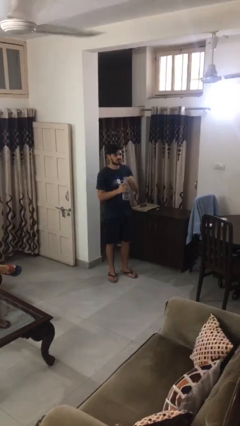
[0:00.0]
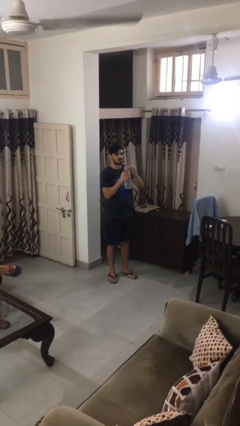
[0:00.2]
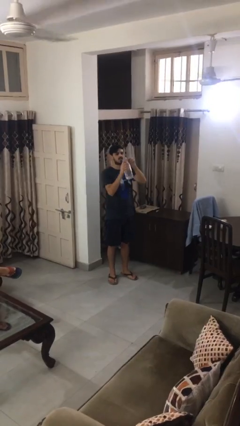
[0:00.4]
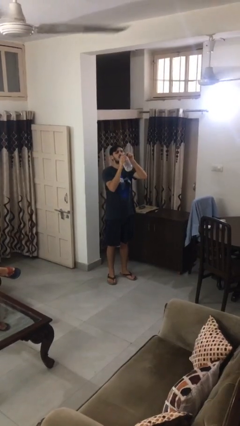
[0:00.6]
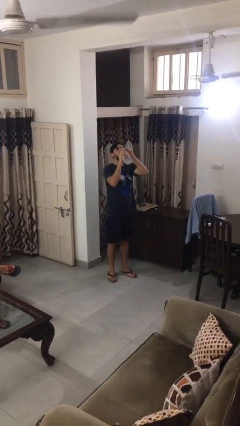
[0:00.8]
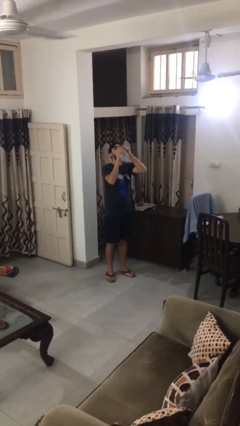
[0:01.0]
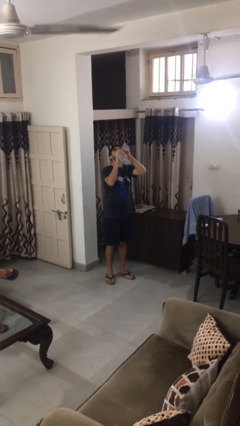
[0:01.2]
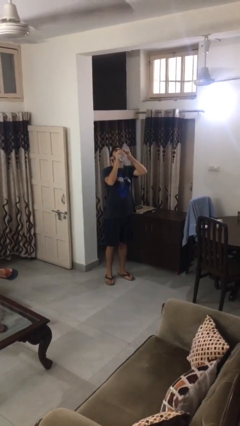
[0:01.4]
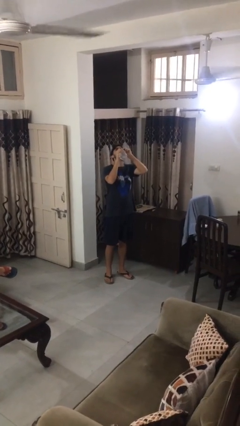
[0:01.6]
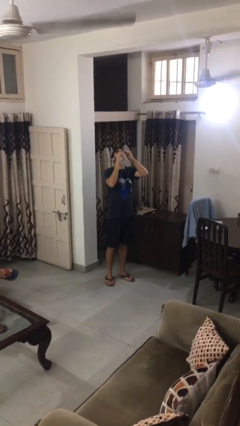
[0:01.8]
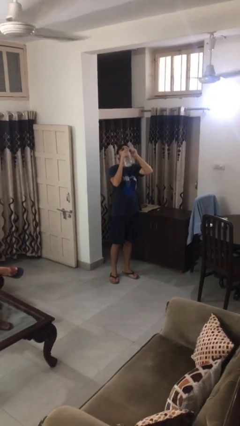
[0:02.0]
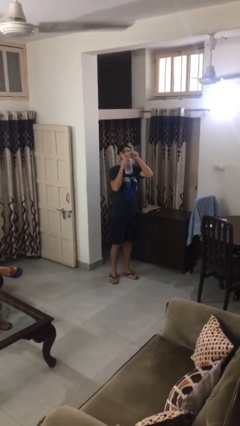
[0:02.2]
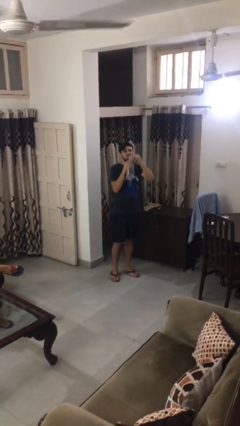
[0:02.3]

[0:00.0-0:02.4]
person drinks from bottle

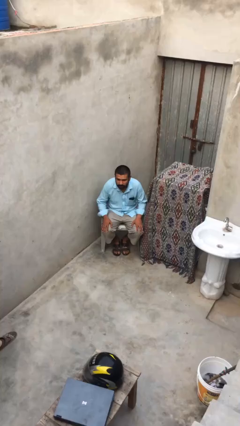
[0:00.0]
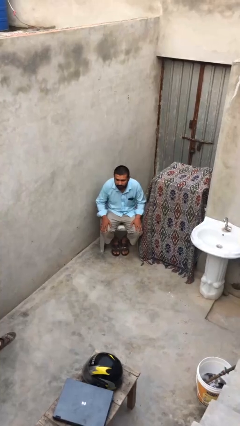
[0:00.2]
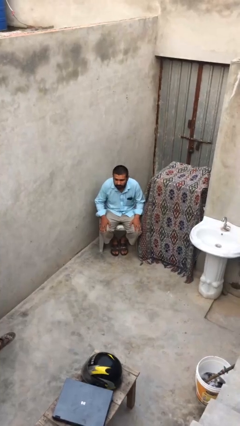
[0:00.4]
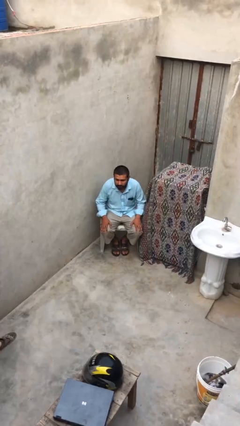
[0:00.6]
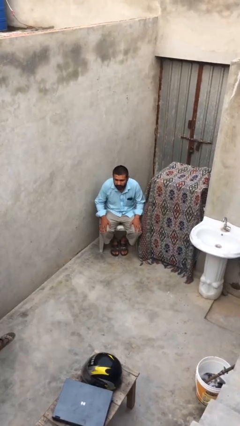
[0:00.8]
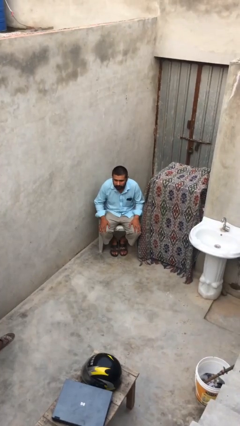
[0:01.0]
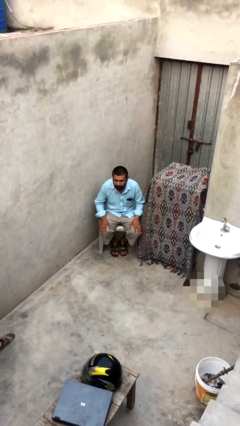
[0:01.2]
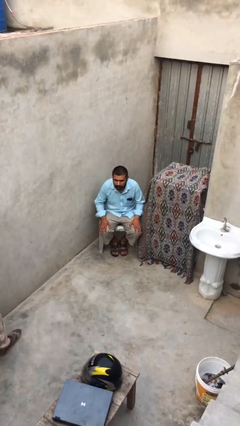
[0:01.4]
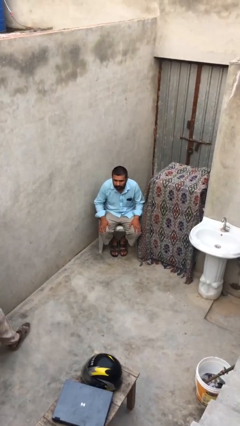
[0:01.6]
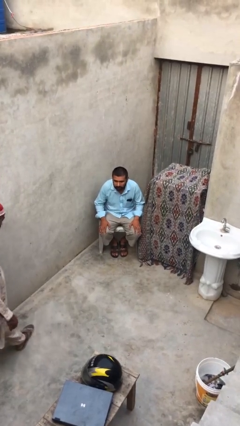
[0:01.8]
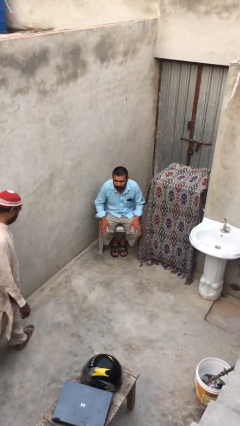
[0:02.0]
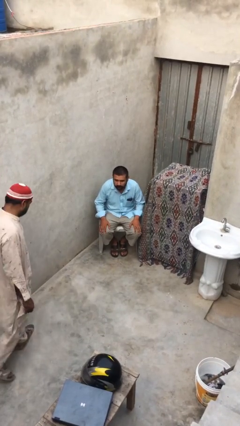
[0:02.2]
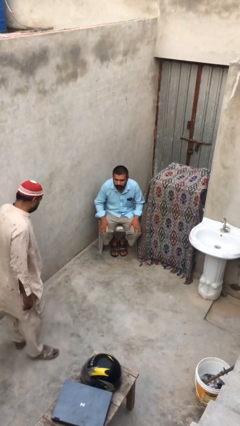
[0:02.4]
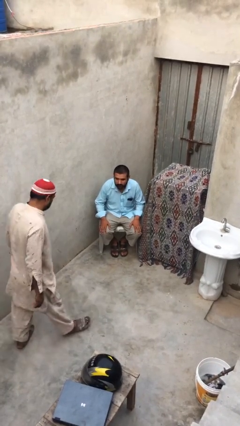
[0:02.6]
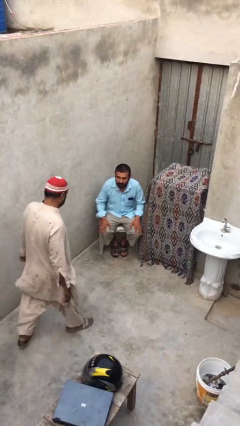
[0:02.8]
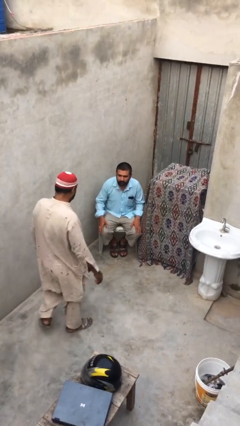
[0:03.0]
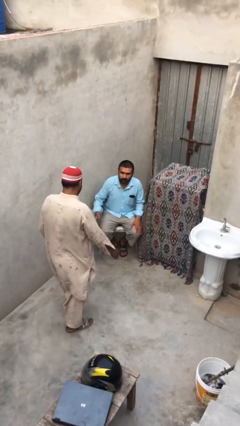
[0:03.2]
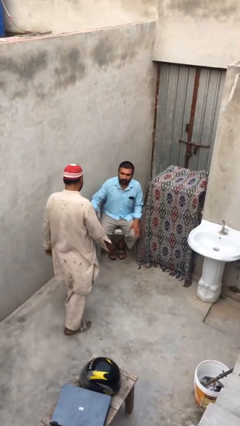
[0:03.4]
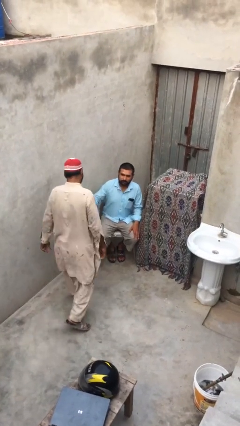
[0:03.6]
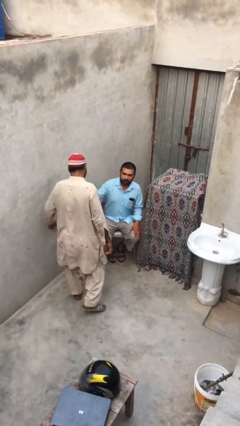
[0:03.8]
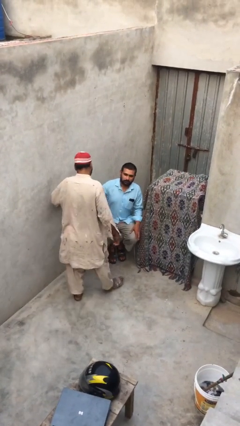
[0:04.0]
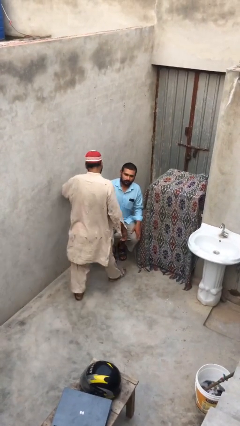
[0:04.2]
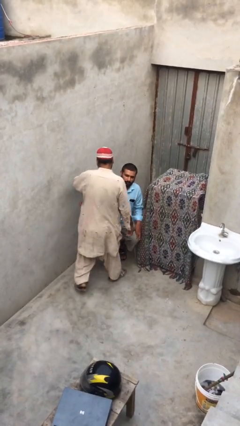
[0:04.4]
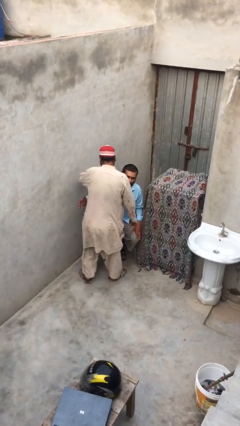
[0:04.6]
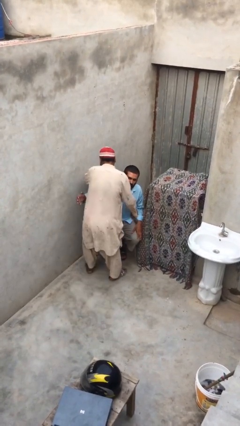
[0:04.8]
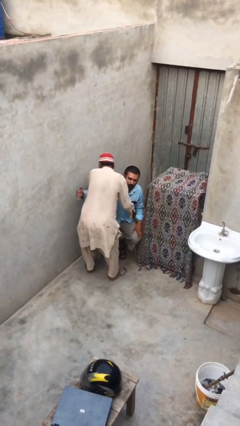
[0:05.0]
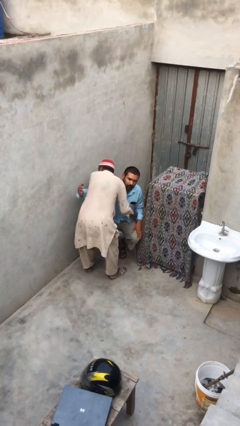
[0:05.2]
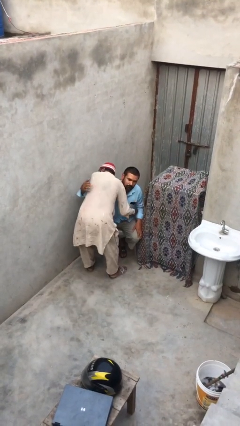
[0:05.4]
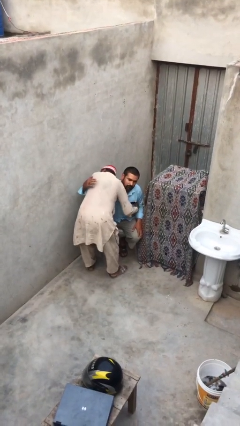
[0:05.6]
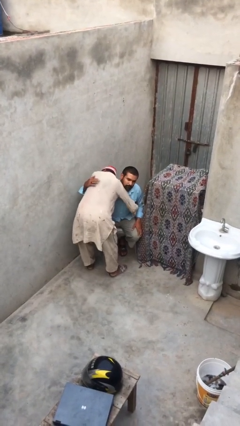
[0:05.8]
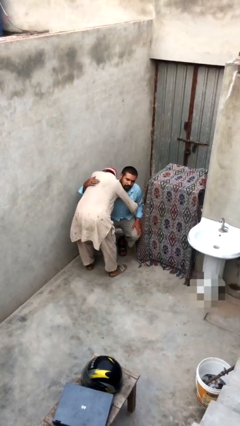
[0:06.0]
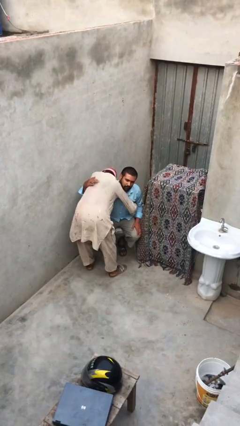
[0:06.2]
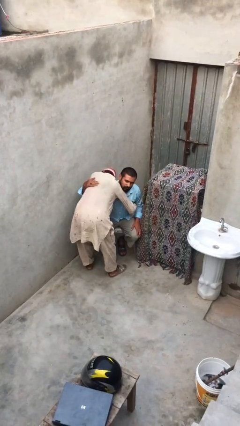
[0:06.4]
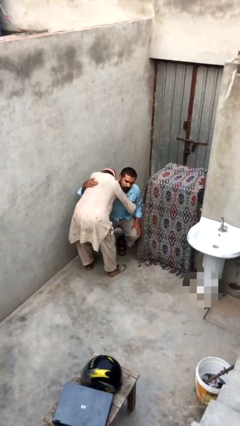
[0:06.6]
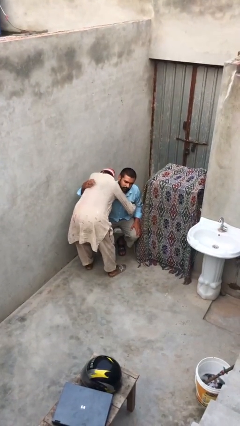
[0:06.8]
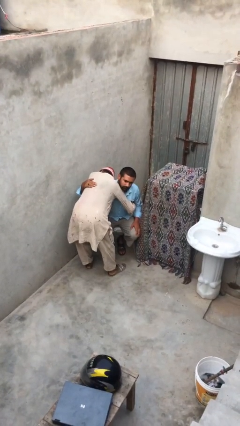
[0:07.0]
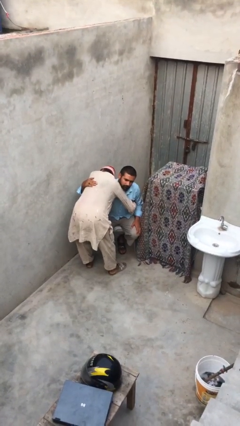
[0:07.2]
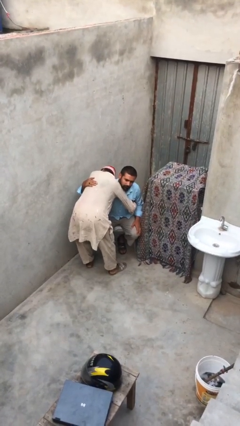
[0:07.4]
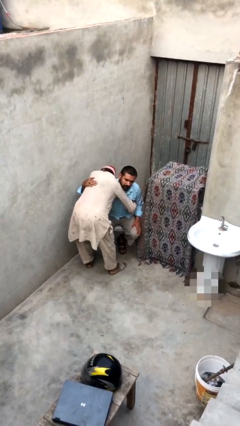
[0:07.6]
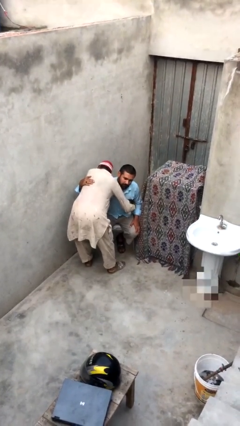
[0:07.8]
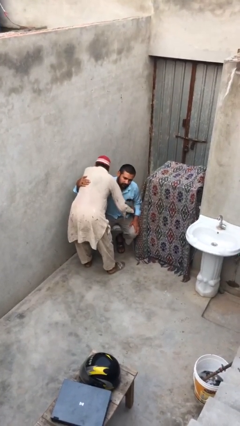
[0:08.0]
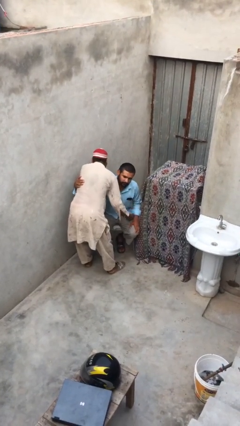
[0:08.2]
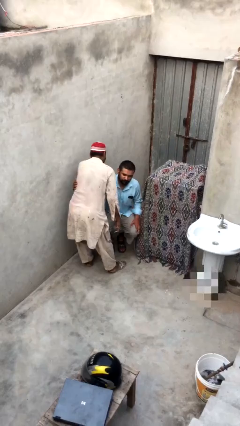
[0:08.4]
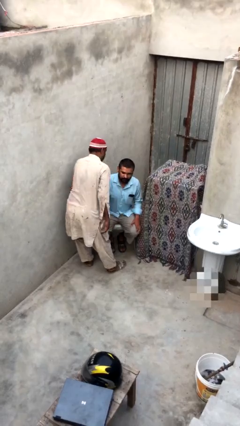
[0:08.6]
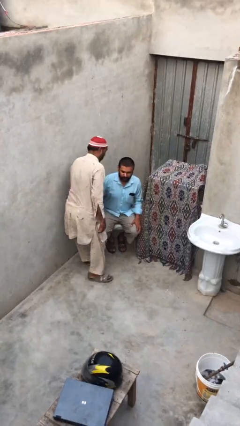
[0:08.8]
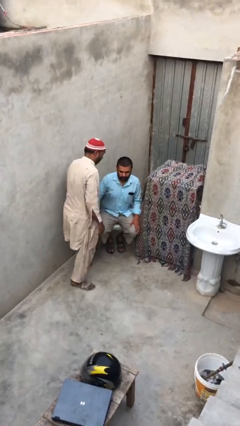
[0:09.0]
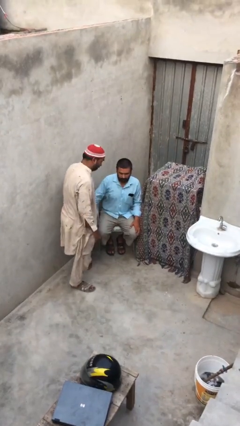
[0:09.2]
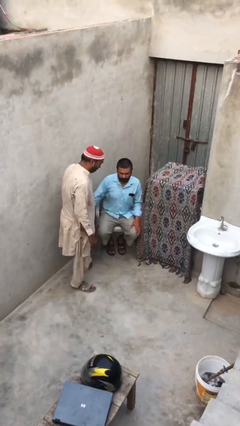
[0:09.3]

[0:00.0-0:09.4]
person embraces person

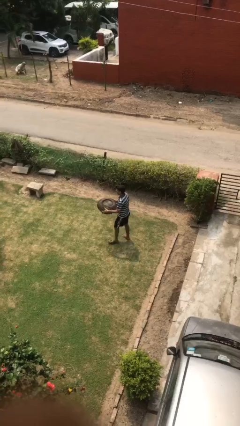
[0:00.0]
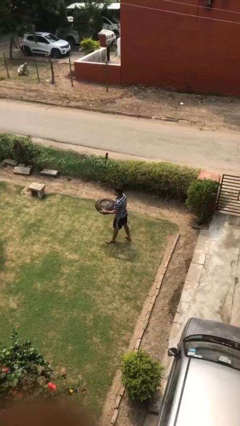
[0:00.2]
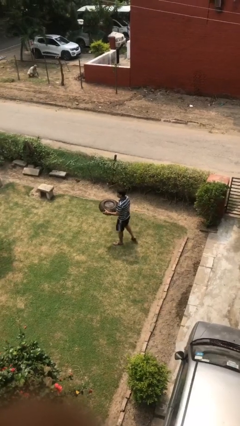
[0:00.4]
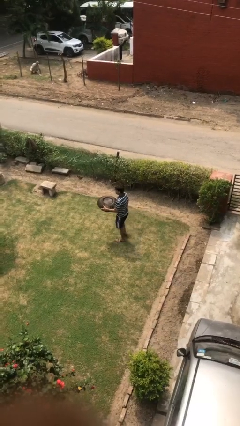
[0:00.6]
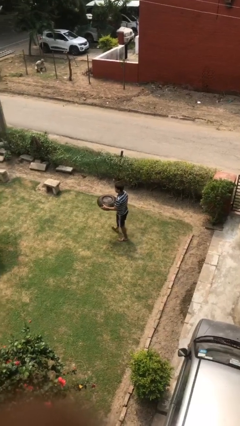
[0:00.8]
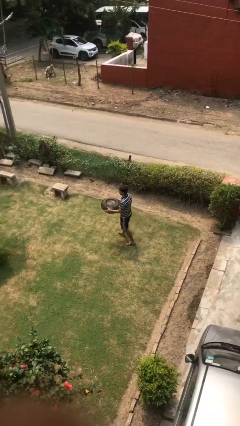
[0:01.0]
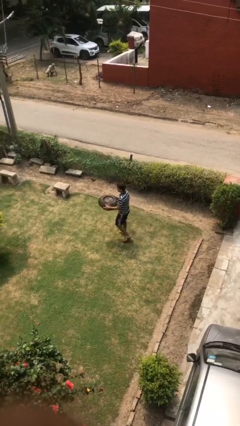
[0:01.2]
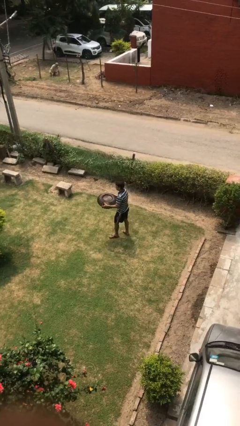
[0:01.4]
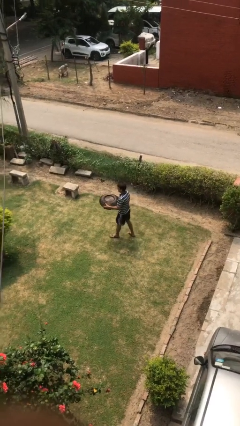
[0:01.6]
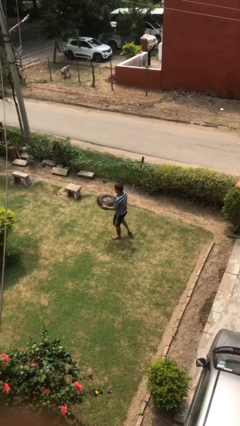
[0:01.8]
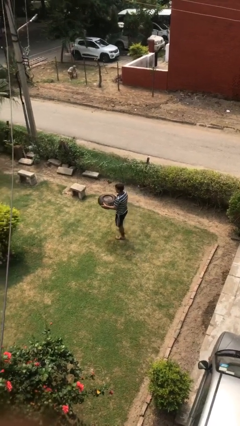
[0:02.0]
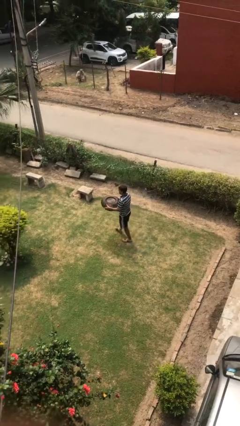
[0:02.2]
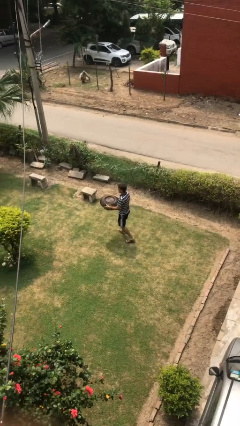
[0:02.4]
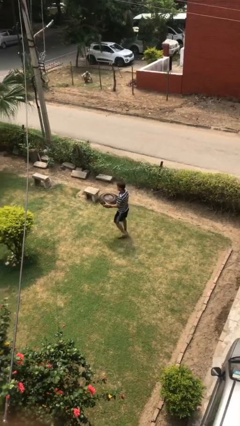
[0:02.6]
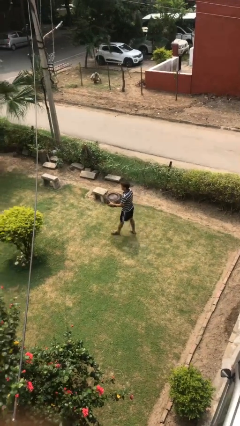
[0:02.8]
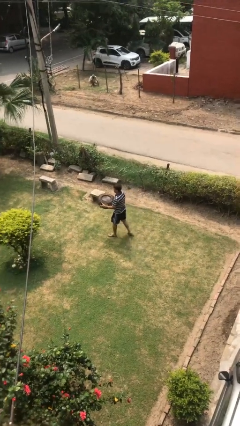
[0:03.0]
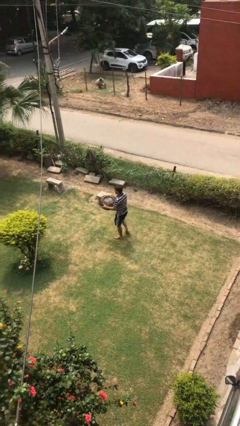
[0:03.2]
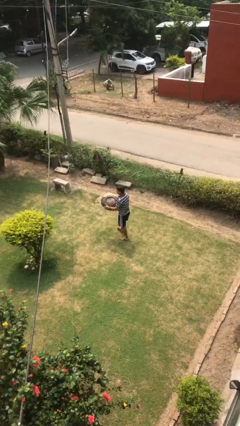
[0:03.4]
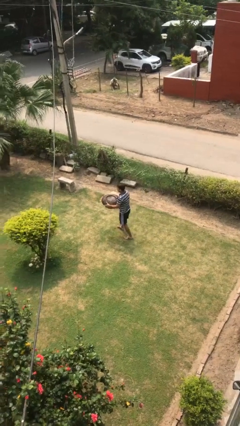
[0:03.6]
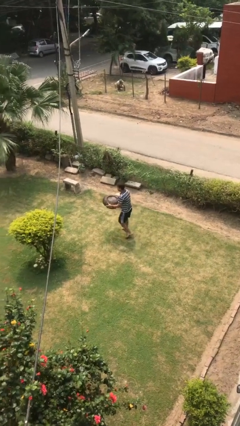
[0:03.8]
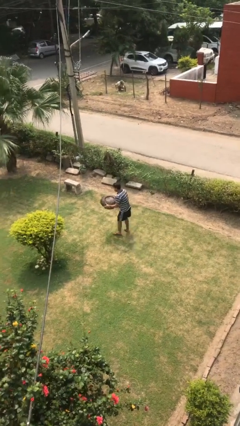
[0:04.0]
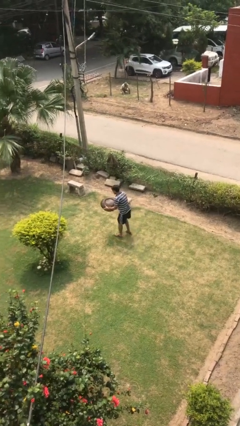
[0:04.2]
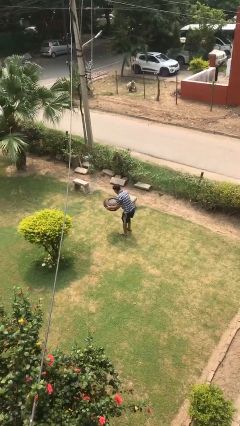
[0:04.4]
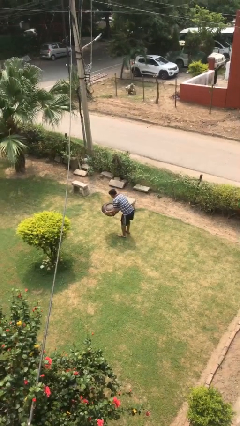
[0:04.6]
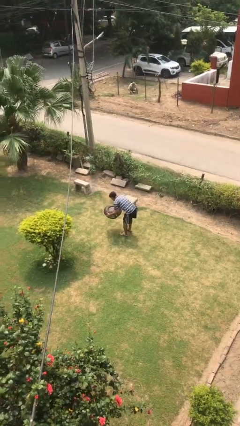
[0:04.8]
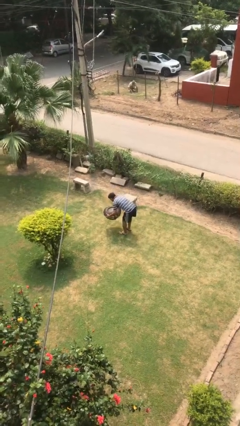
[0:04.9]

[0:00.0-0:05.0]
person carries heavy object

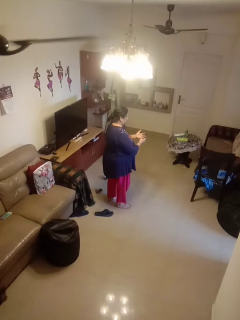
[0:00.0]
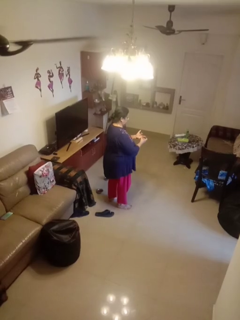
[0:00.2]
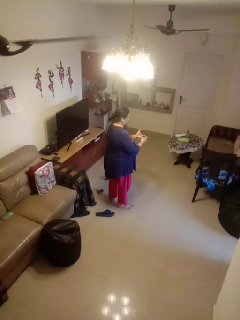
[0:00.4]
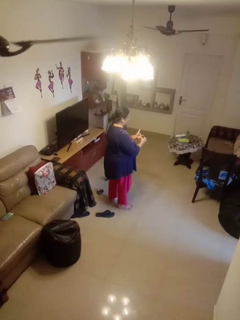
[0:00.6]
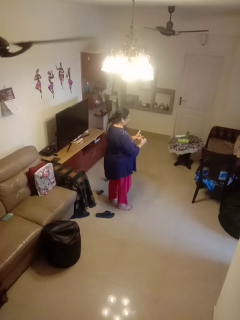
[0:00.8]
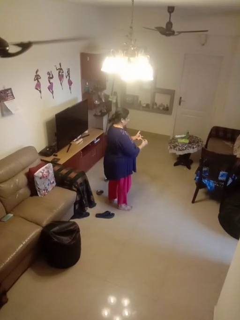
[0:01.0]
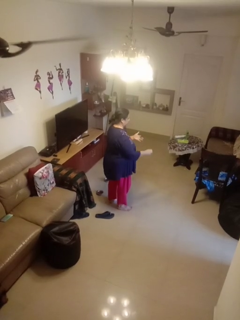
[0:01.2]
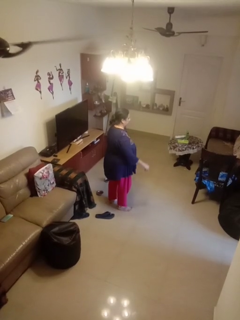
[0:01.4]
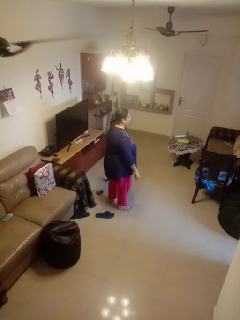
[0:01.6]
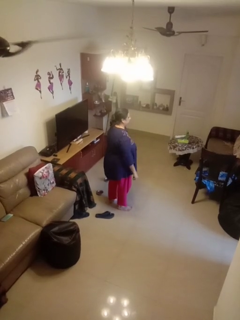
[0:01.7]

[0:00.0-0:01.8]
person takes off ring
